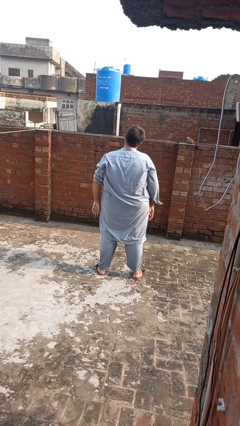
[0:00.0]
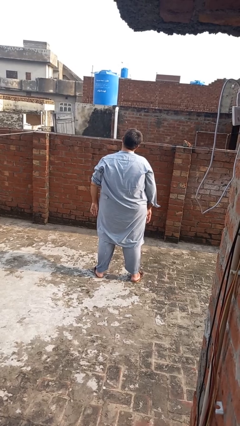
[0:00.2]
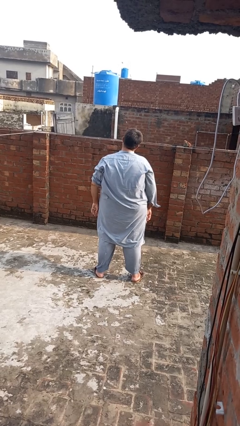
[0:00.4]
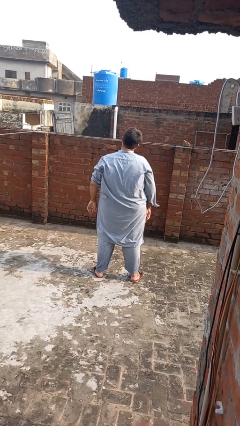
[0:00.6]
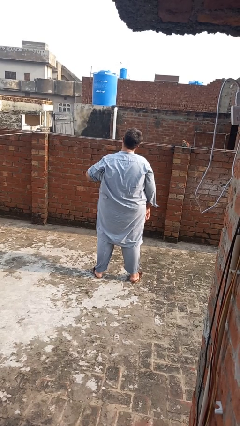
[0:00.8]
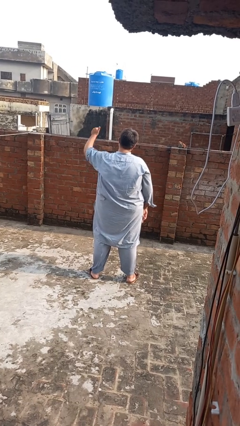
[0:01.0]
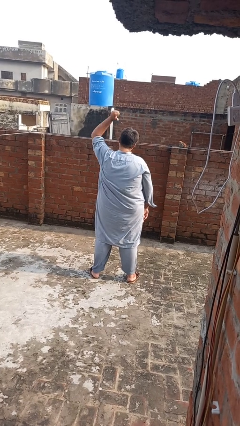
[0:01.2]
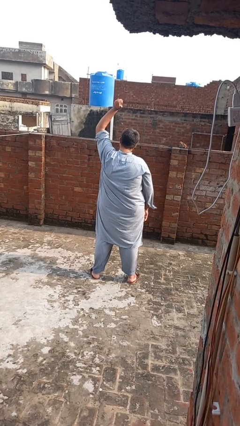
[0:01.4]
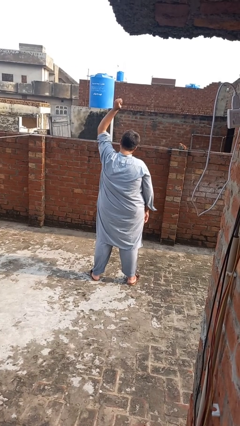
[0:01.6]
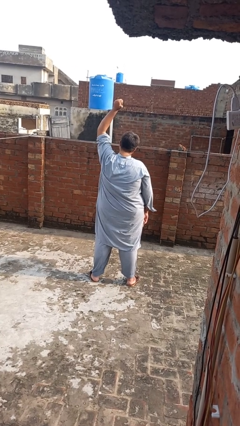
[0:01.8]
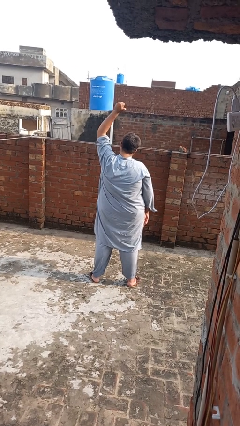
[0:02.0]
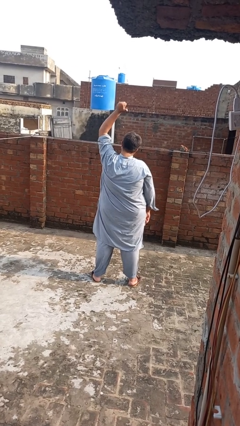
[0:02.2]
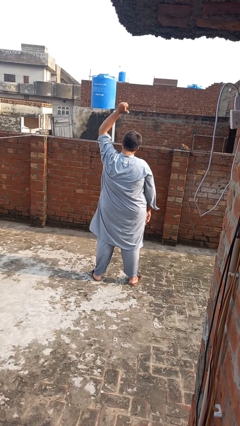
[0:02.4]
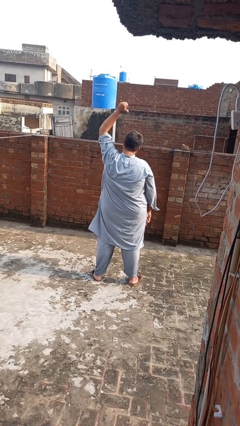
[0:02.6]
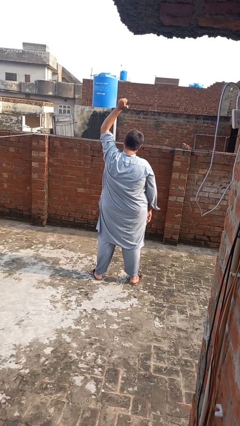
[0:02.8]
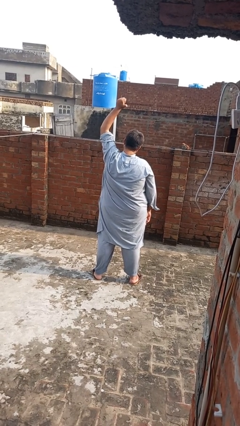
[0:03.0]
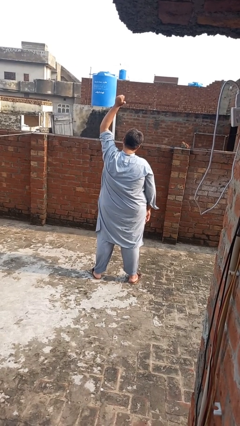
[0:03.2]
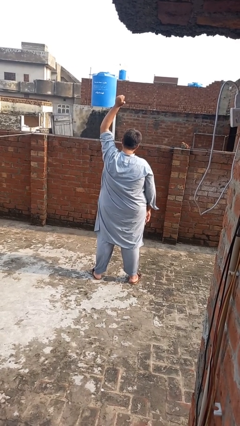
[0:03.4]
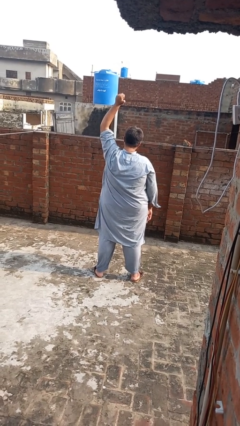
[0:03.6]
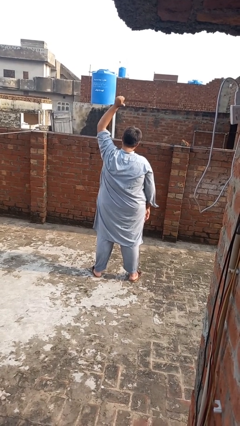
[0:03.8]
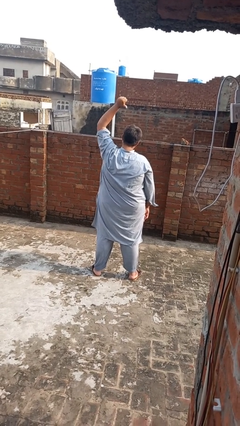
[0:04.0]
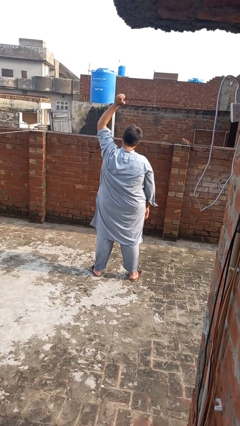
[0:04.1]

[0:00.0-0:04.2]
person gestures behind me

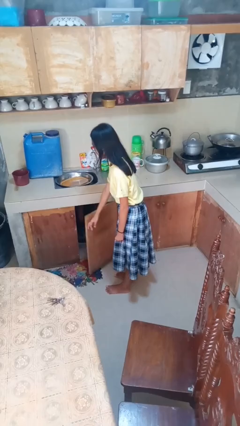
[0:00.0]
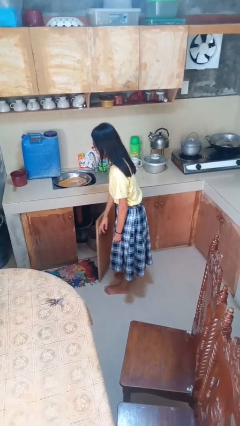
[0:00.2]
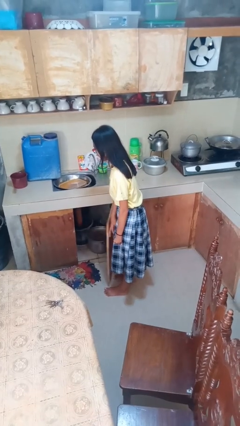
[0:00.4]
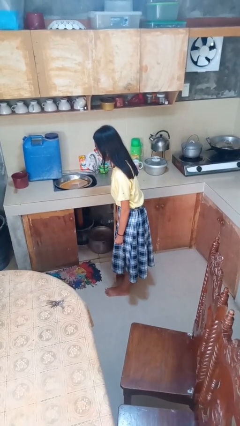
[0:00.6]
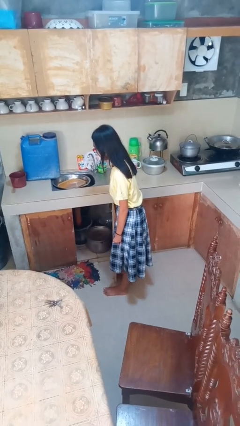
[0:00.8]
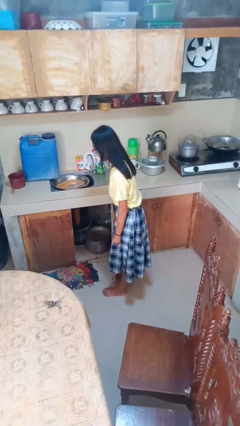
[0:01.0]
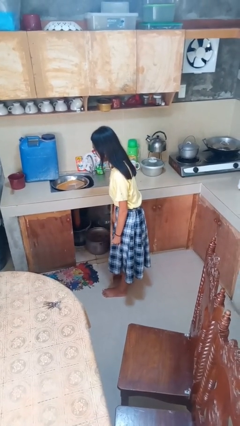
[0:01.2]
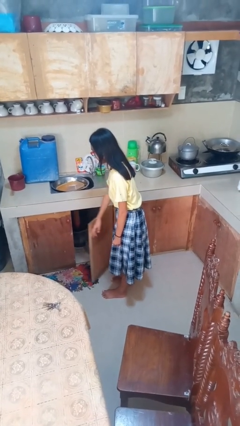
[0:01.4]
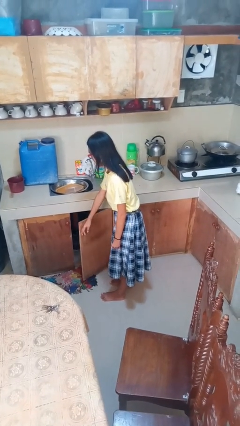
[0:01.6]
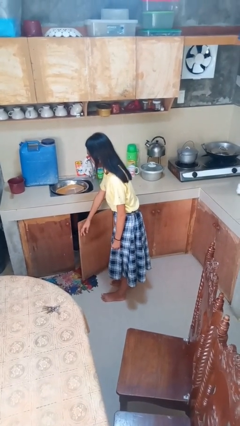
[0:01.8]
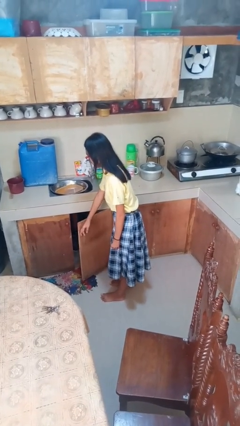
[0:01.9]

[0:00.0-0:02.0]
person opens cabinet

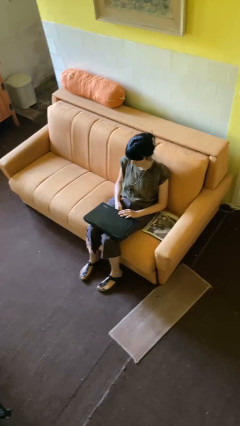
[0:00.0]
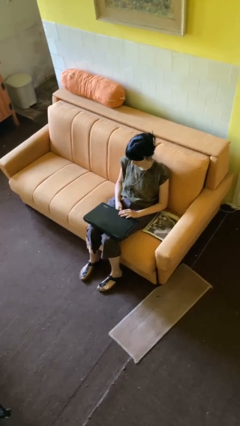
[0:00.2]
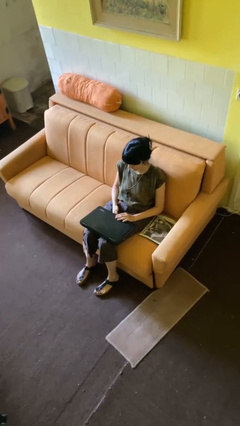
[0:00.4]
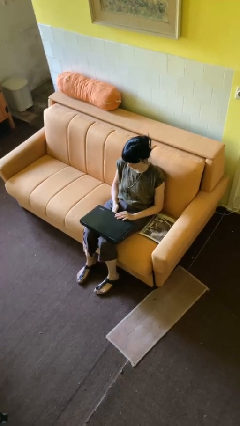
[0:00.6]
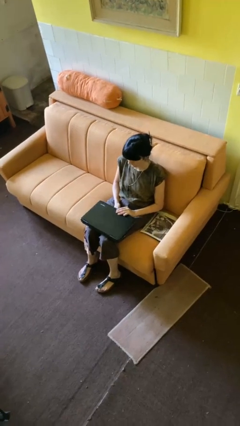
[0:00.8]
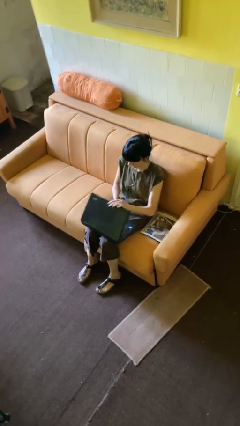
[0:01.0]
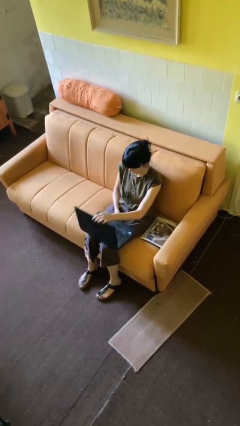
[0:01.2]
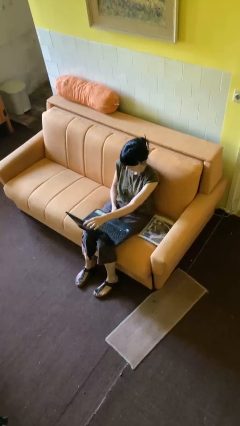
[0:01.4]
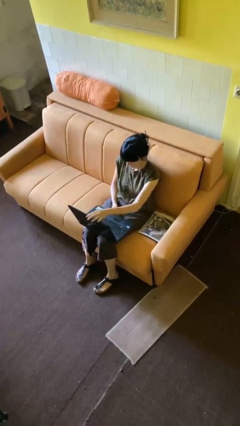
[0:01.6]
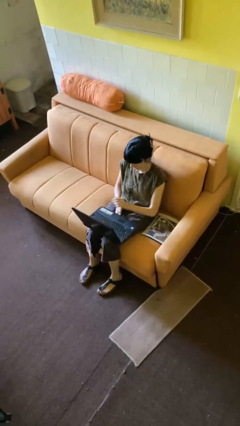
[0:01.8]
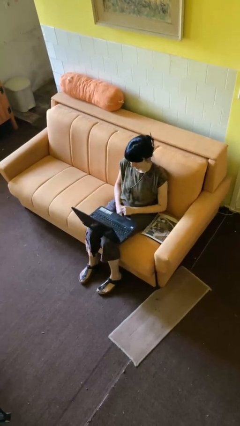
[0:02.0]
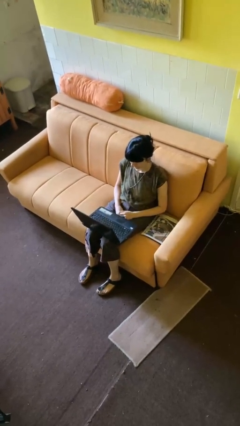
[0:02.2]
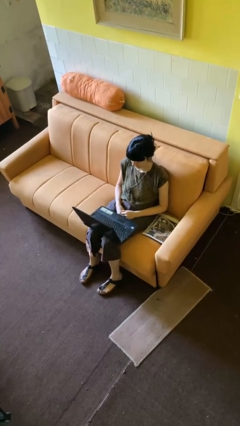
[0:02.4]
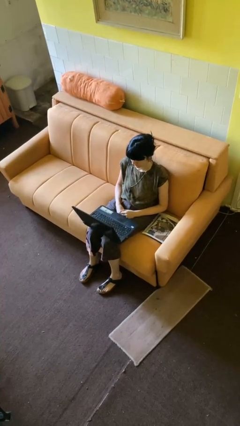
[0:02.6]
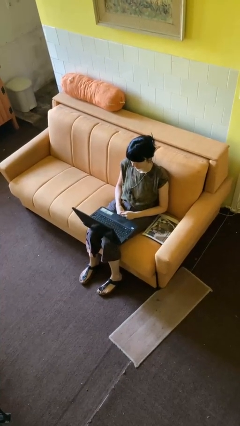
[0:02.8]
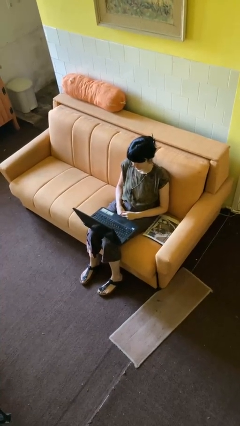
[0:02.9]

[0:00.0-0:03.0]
person opens laptop

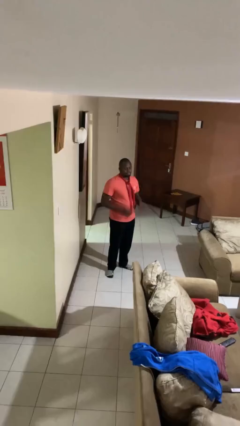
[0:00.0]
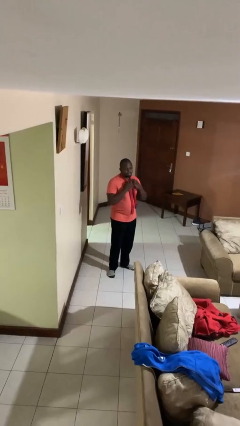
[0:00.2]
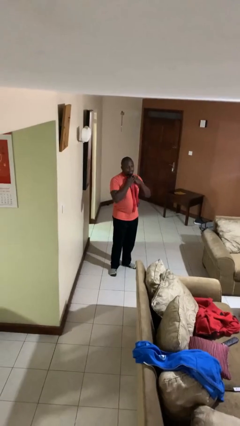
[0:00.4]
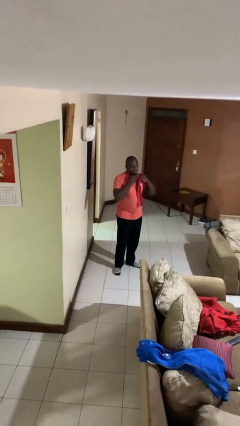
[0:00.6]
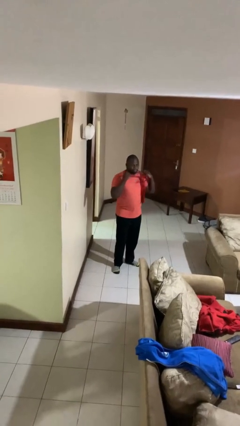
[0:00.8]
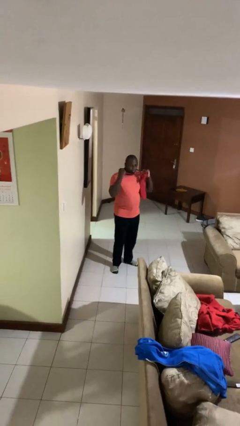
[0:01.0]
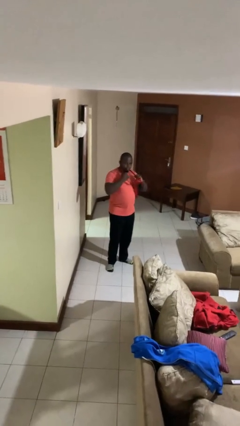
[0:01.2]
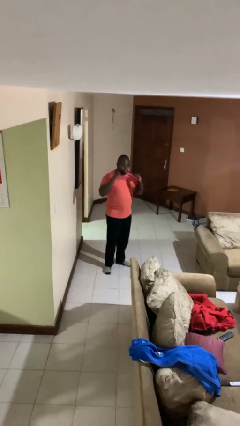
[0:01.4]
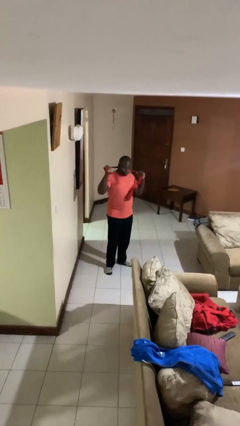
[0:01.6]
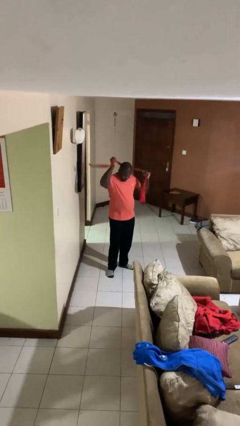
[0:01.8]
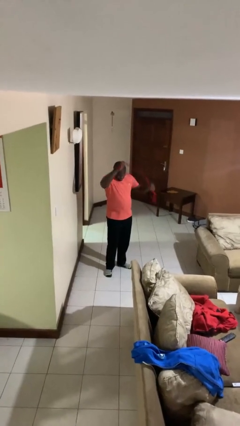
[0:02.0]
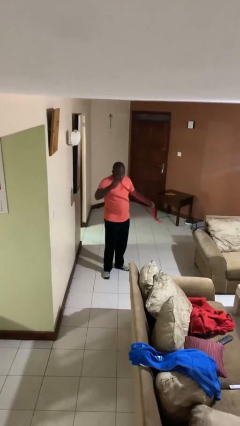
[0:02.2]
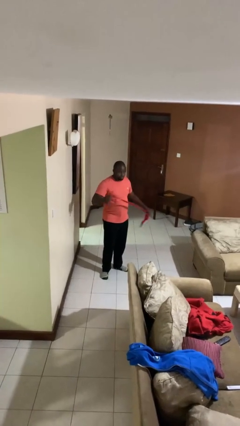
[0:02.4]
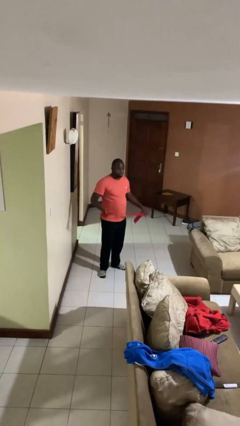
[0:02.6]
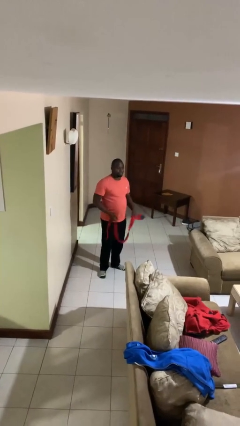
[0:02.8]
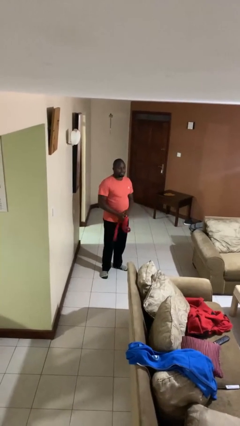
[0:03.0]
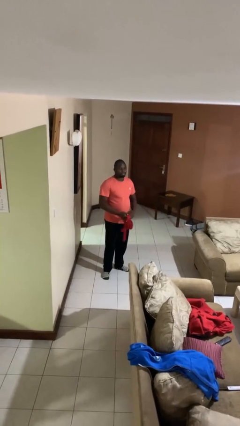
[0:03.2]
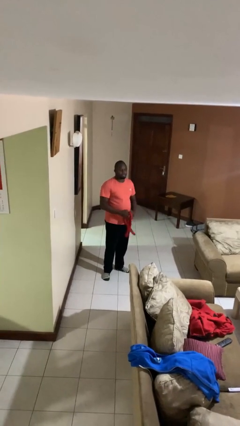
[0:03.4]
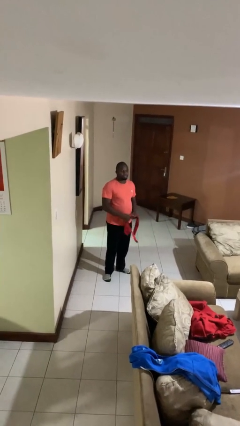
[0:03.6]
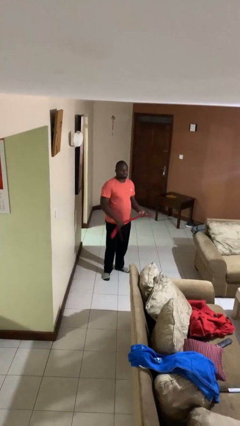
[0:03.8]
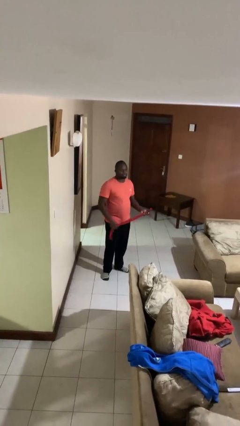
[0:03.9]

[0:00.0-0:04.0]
person takes off necktie

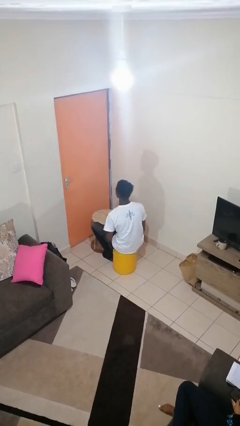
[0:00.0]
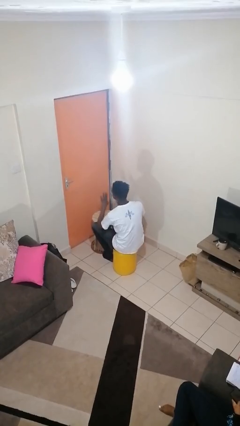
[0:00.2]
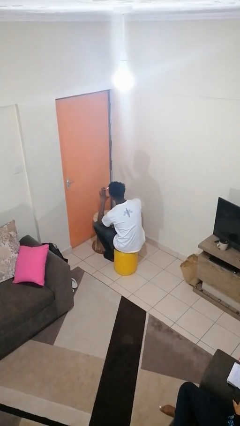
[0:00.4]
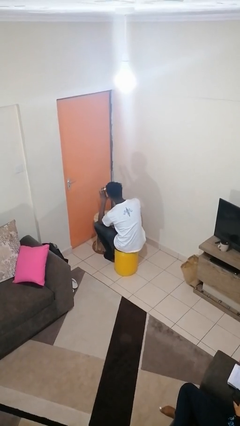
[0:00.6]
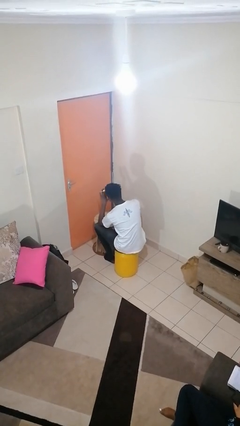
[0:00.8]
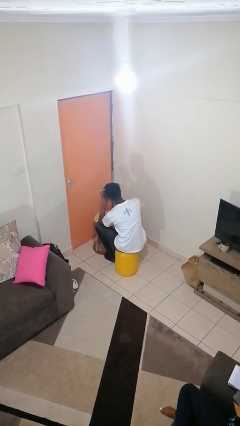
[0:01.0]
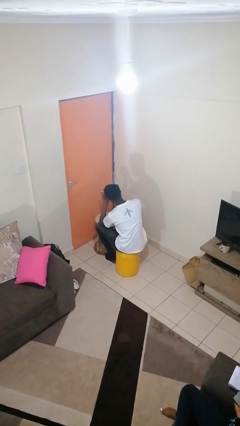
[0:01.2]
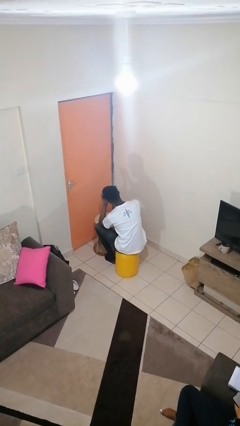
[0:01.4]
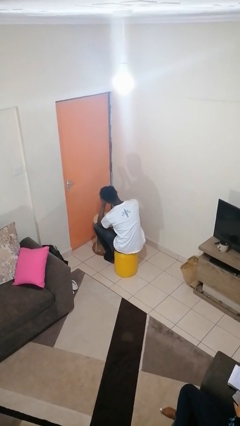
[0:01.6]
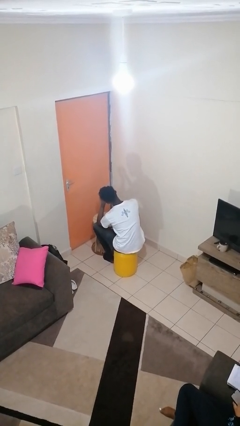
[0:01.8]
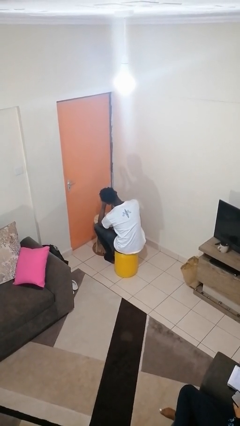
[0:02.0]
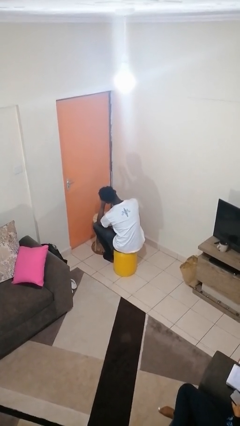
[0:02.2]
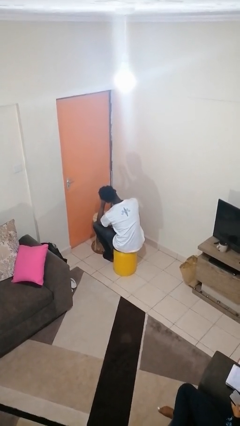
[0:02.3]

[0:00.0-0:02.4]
person paints fingernails

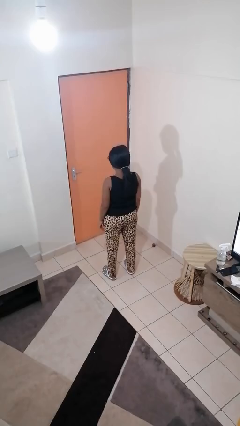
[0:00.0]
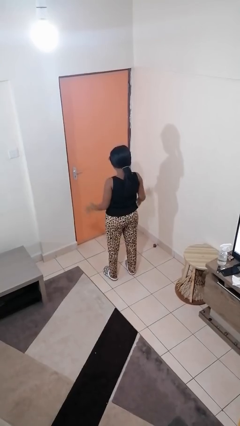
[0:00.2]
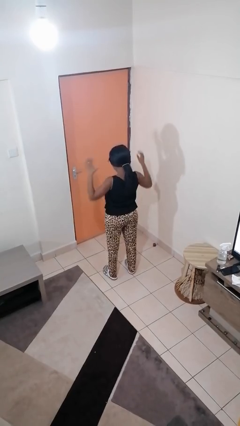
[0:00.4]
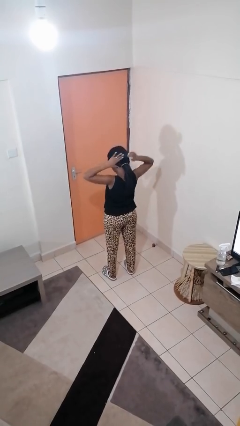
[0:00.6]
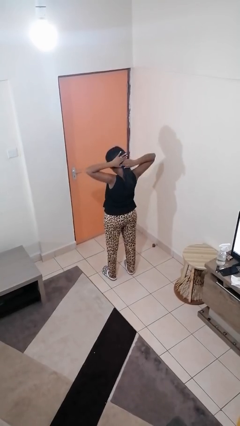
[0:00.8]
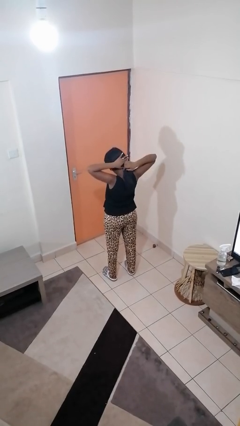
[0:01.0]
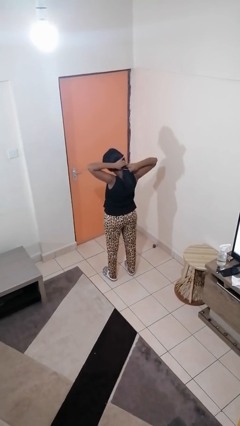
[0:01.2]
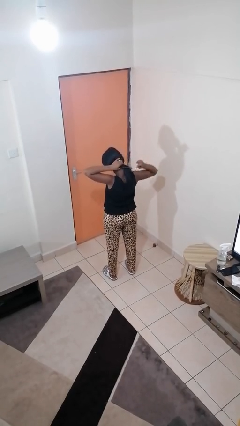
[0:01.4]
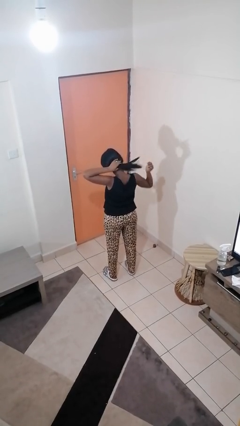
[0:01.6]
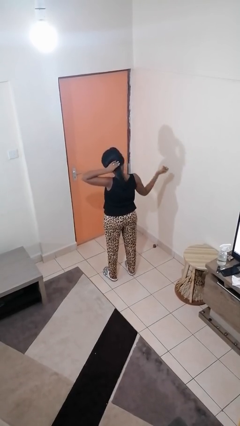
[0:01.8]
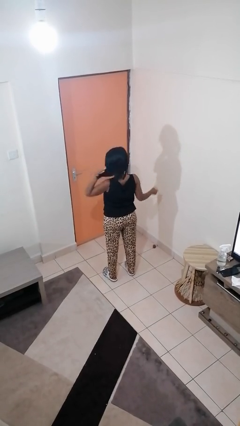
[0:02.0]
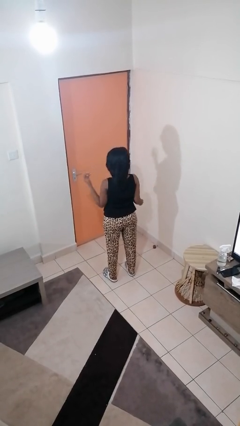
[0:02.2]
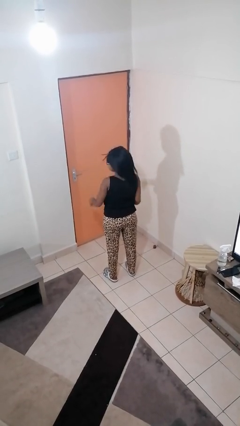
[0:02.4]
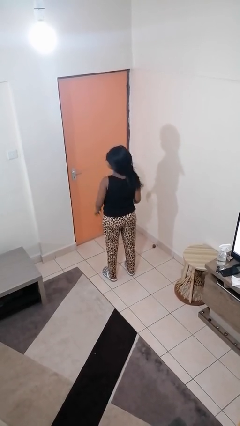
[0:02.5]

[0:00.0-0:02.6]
person takes off hairtie
